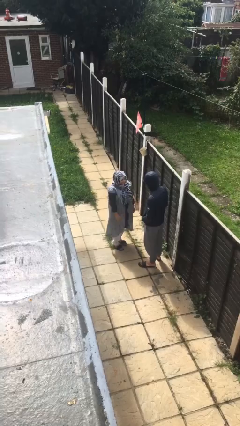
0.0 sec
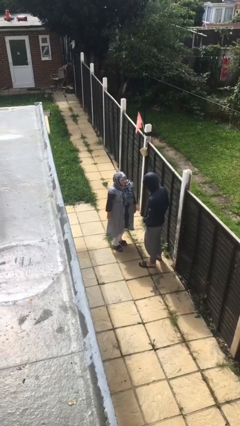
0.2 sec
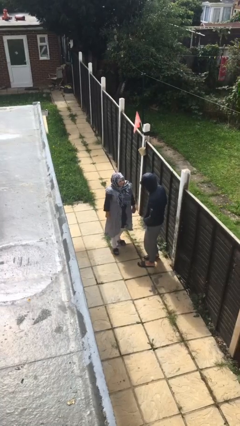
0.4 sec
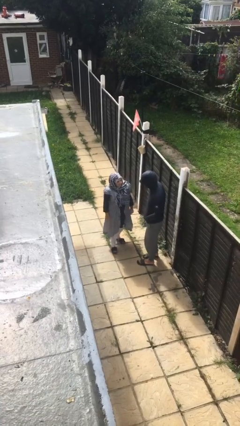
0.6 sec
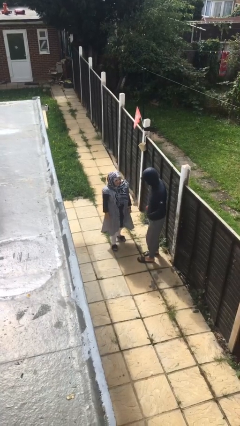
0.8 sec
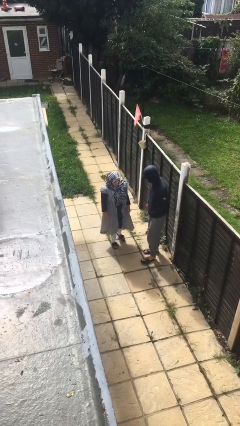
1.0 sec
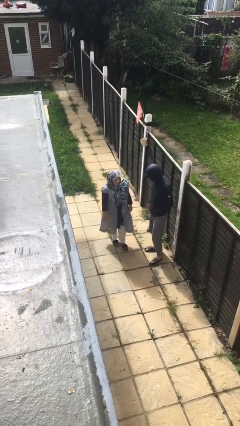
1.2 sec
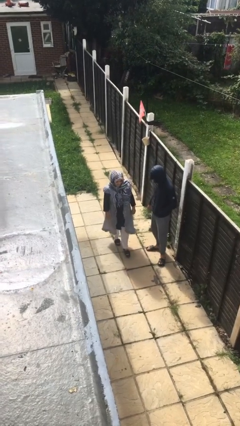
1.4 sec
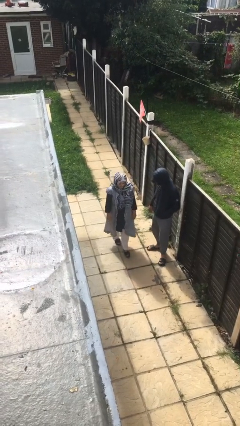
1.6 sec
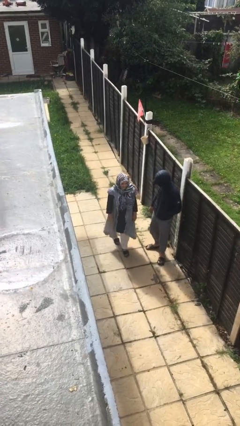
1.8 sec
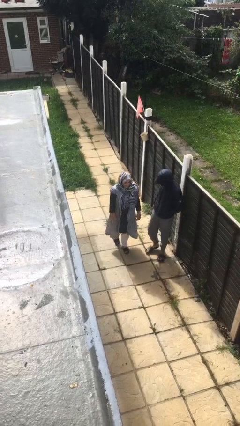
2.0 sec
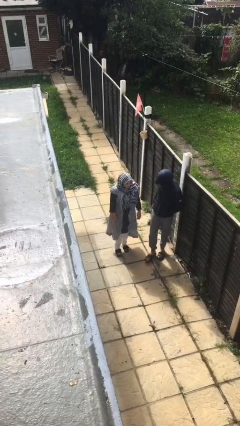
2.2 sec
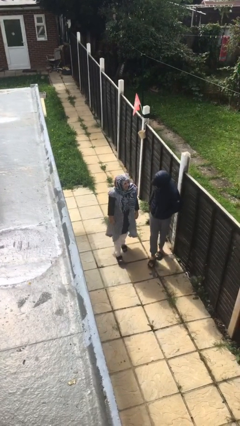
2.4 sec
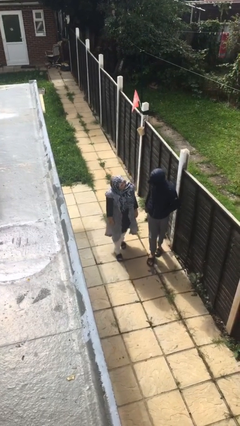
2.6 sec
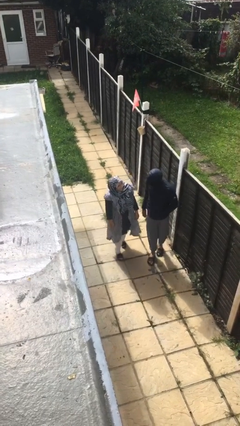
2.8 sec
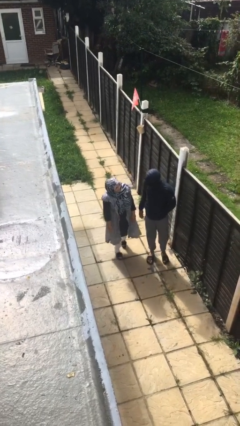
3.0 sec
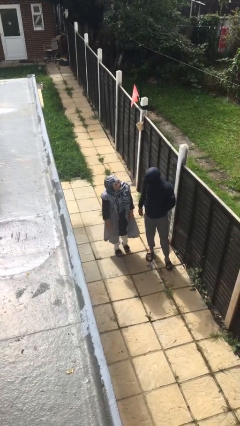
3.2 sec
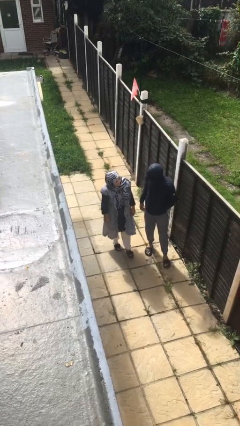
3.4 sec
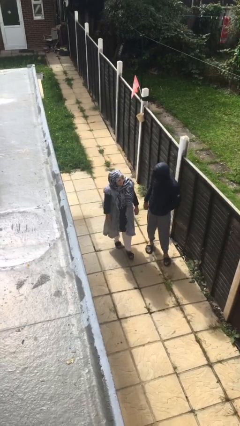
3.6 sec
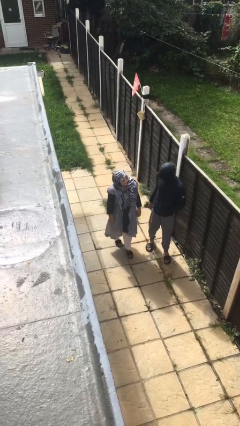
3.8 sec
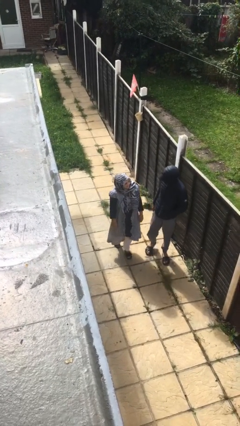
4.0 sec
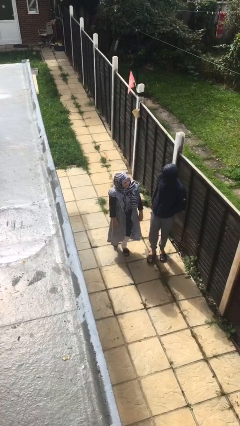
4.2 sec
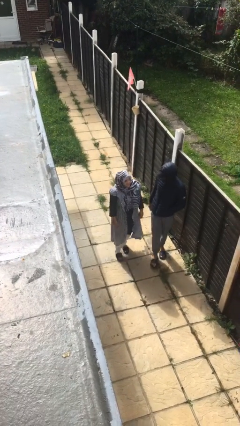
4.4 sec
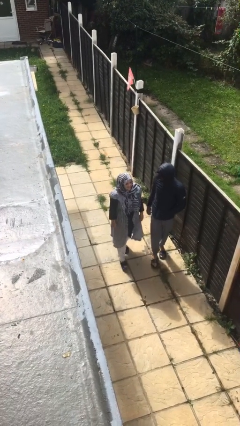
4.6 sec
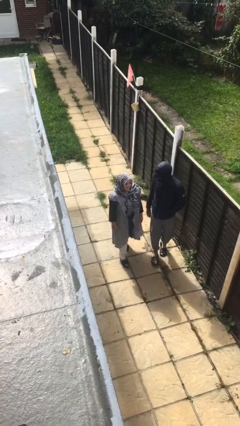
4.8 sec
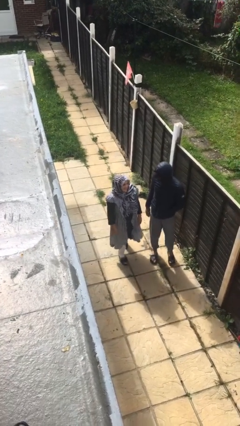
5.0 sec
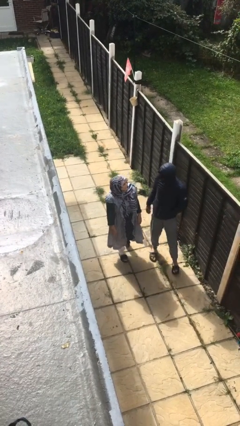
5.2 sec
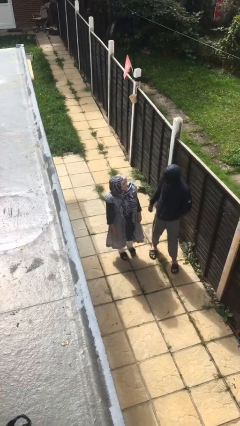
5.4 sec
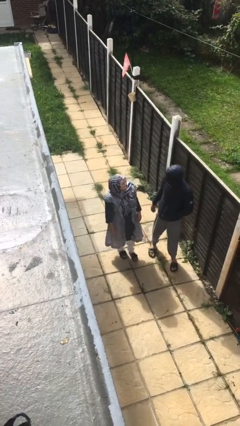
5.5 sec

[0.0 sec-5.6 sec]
person talks to person

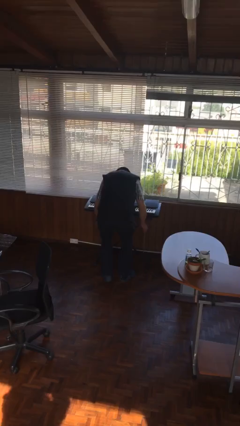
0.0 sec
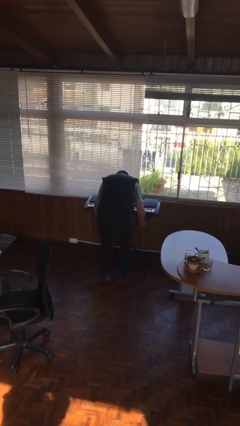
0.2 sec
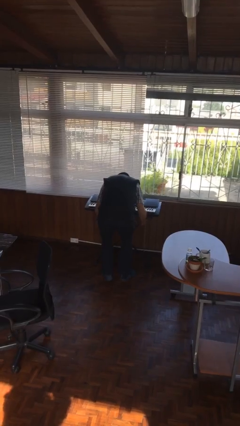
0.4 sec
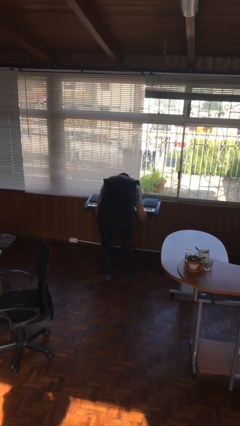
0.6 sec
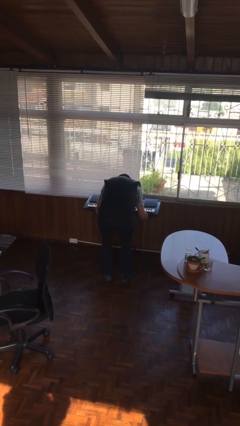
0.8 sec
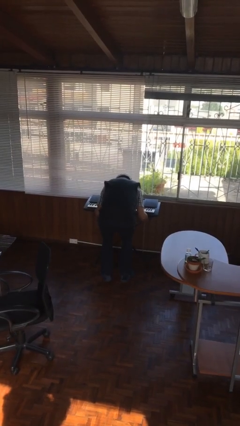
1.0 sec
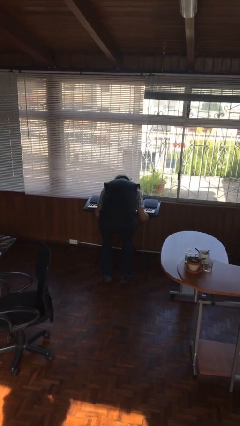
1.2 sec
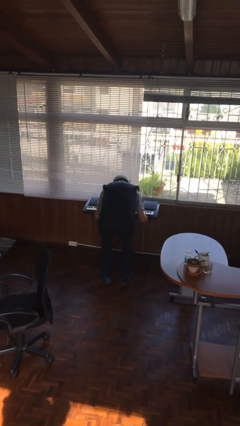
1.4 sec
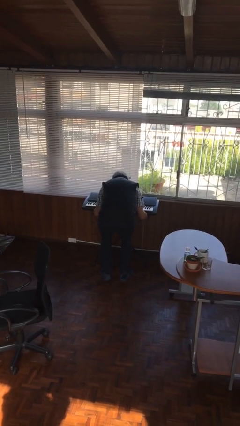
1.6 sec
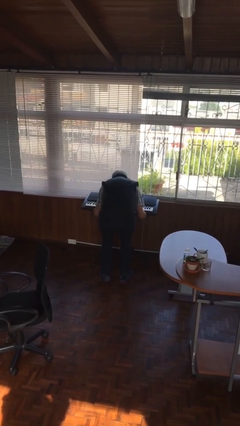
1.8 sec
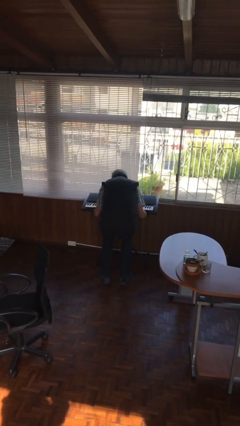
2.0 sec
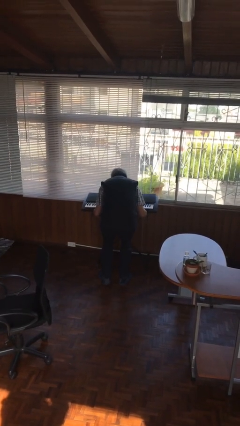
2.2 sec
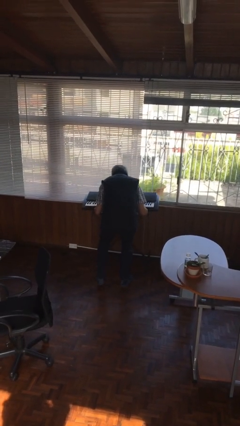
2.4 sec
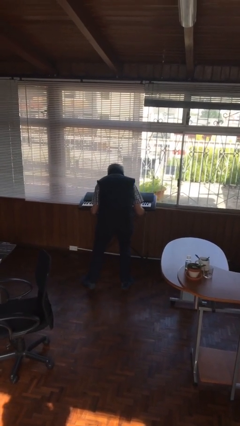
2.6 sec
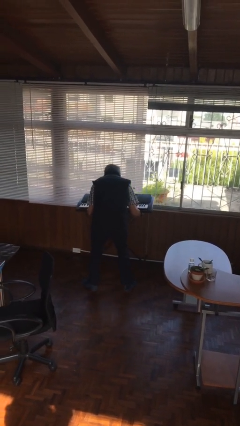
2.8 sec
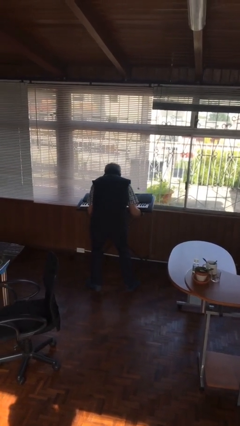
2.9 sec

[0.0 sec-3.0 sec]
person picks up object from floor

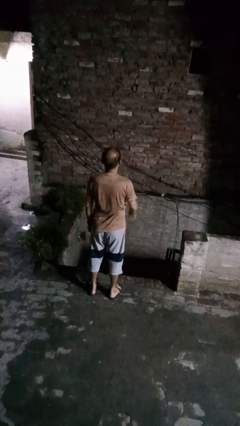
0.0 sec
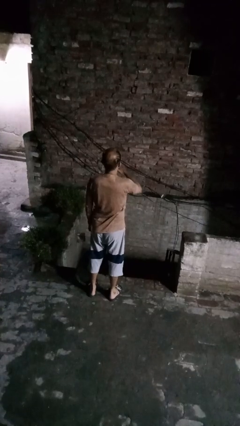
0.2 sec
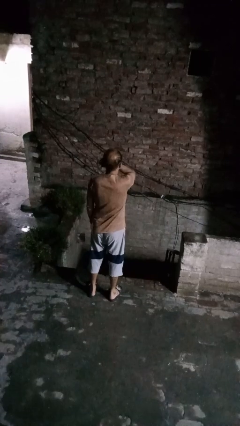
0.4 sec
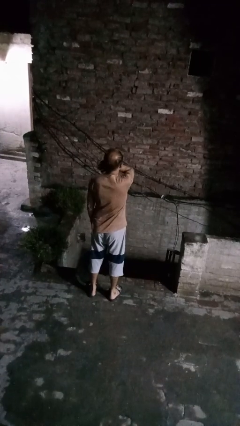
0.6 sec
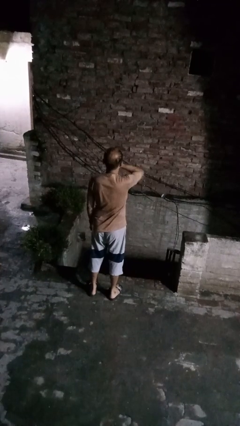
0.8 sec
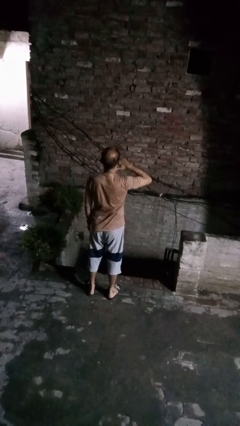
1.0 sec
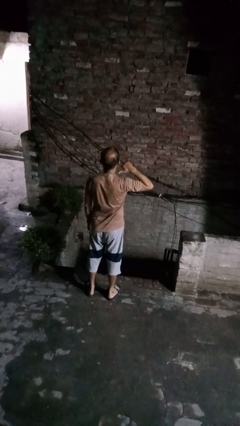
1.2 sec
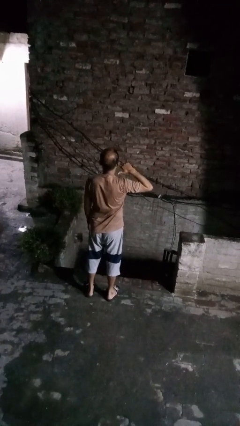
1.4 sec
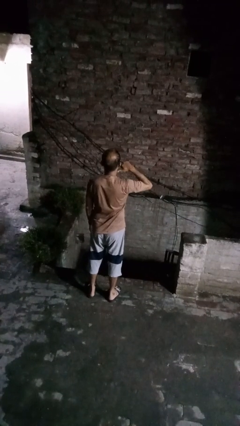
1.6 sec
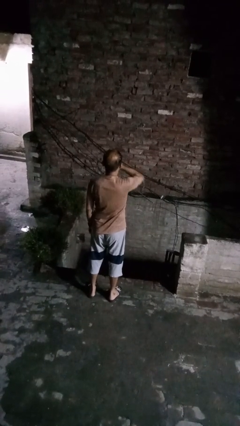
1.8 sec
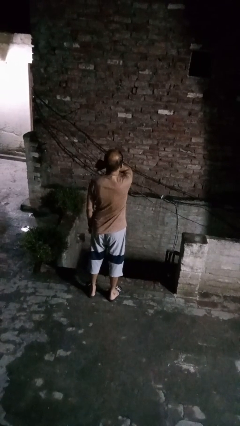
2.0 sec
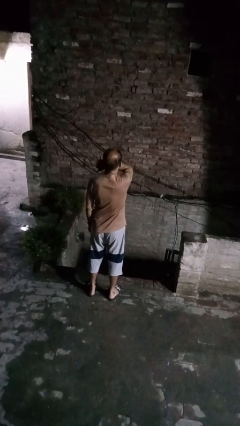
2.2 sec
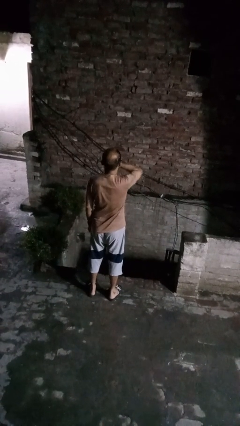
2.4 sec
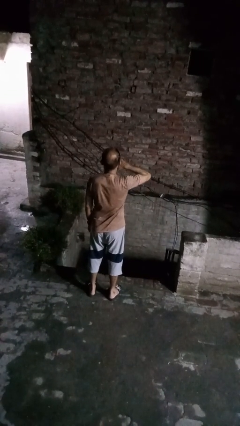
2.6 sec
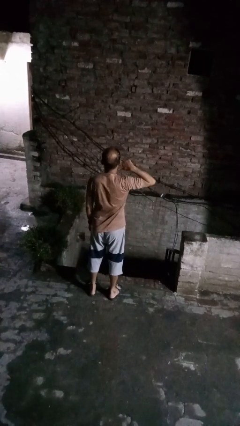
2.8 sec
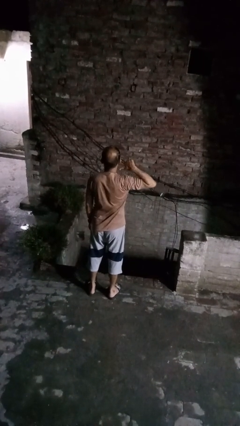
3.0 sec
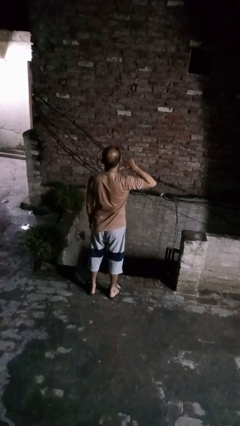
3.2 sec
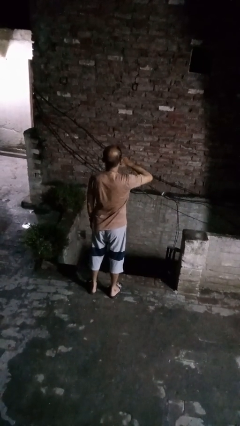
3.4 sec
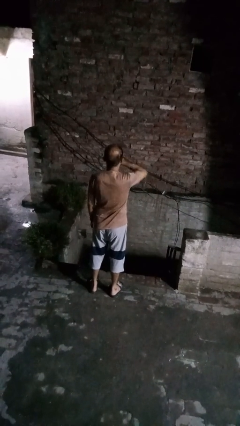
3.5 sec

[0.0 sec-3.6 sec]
person gestures cut

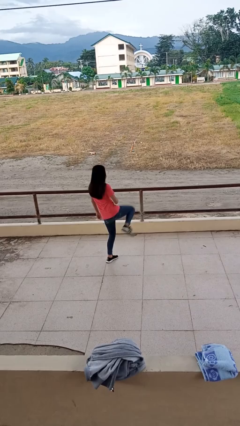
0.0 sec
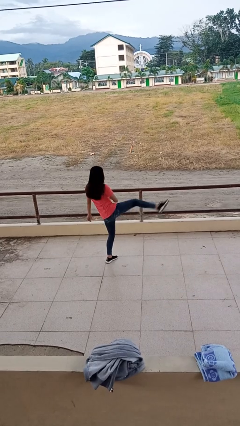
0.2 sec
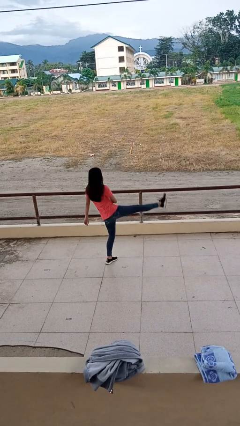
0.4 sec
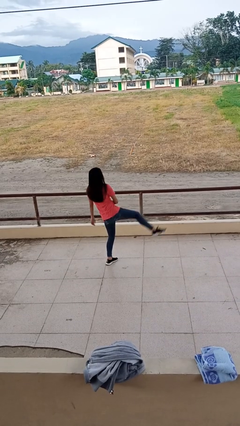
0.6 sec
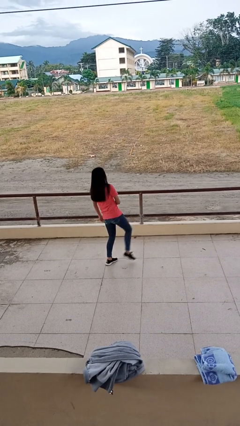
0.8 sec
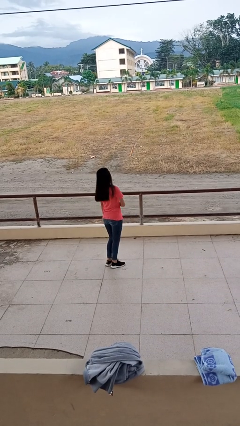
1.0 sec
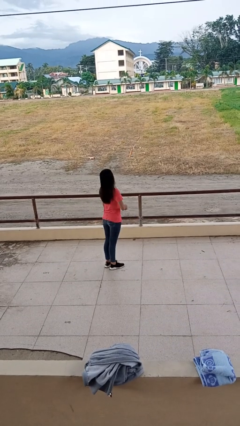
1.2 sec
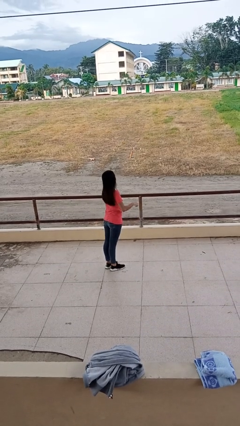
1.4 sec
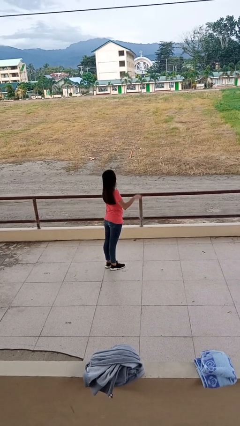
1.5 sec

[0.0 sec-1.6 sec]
person karate kicks

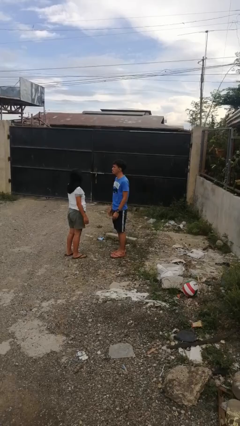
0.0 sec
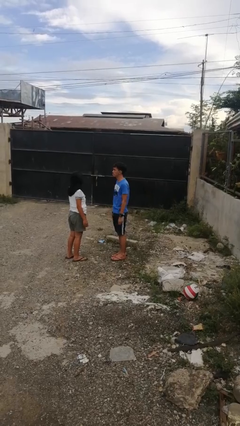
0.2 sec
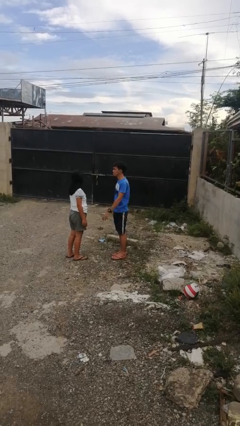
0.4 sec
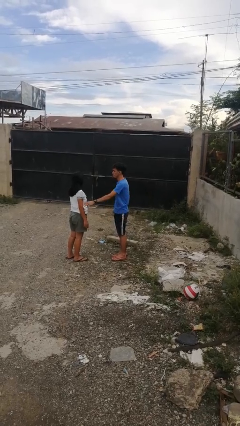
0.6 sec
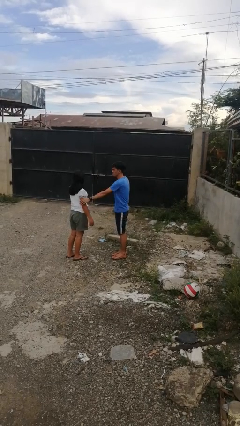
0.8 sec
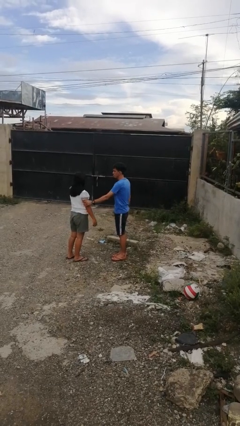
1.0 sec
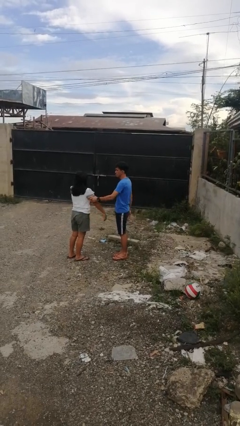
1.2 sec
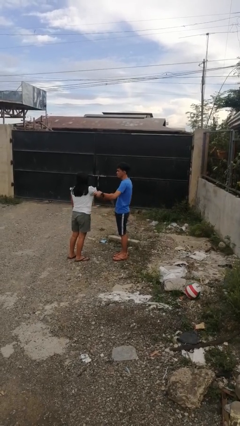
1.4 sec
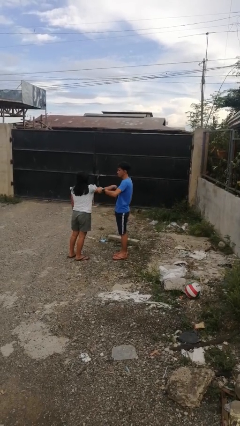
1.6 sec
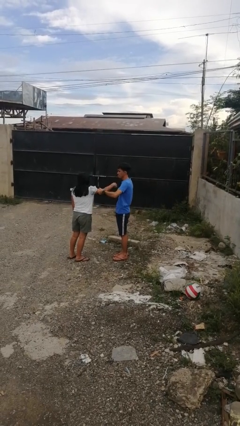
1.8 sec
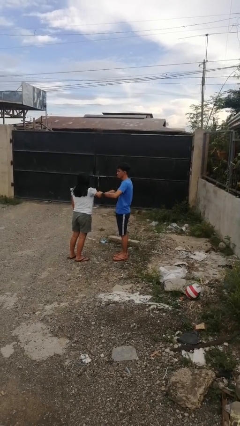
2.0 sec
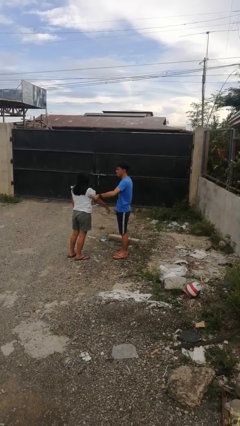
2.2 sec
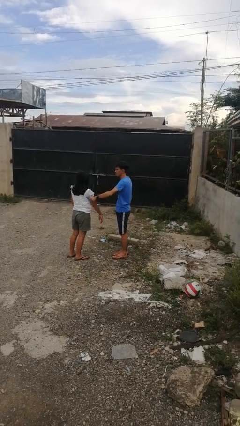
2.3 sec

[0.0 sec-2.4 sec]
person grabs person by bicep

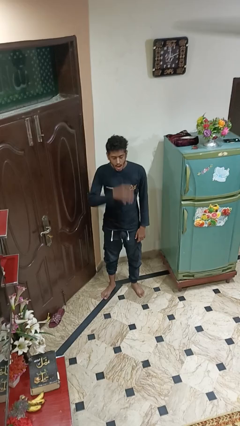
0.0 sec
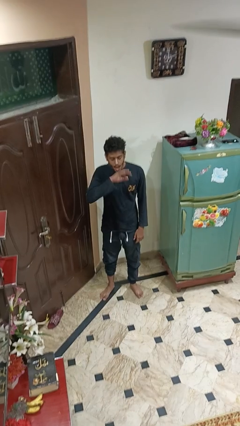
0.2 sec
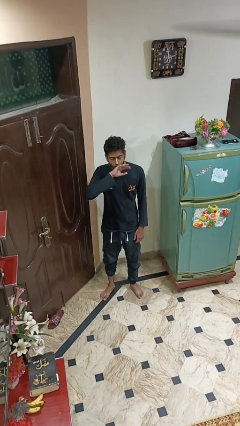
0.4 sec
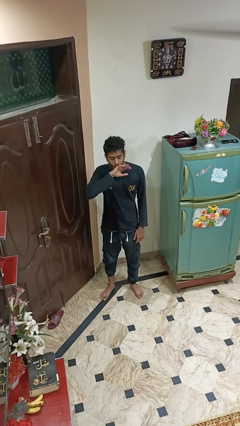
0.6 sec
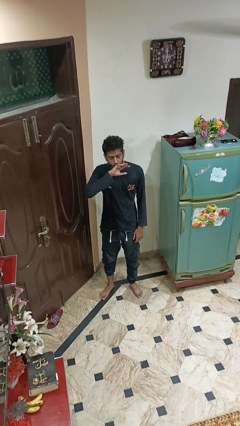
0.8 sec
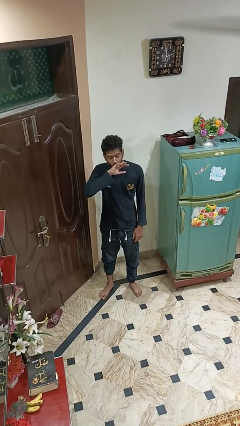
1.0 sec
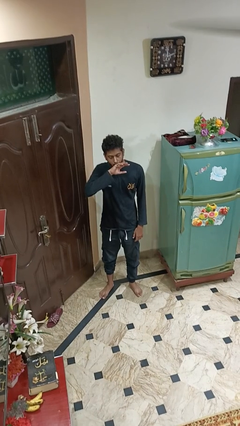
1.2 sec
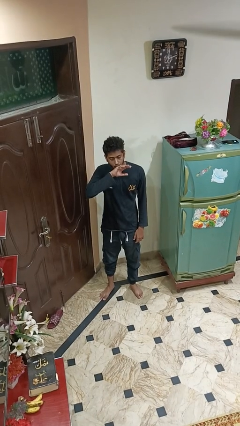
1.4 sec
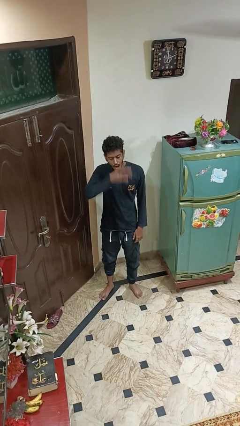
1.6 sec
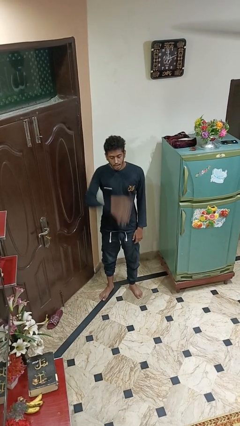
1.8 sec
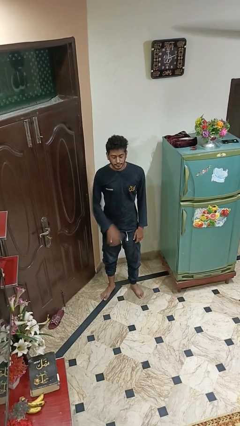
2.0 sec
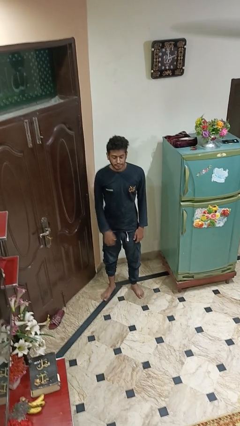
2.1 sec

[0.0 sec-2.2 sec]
person yawns
